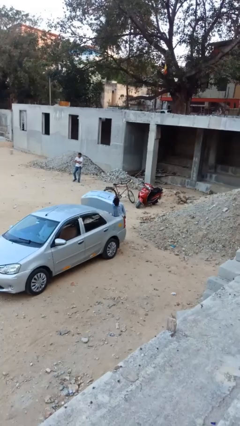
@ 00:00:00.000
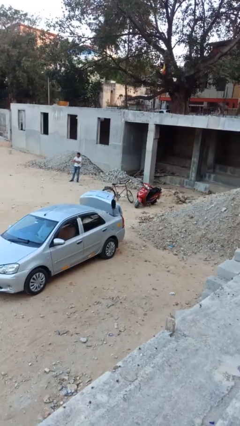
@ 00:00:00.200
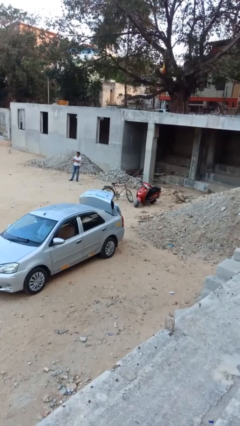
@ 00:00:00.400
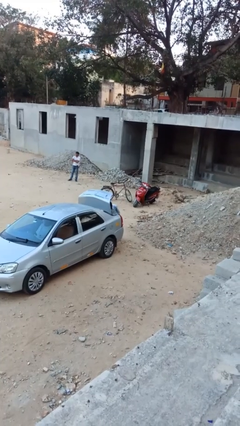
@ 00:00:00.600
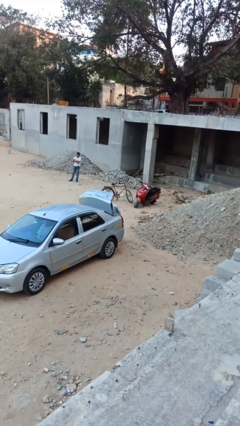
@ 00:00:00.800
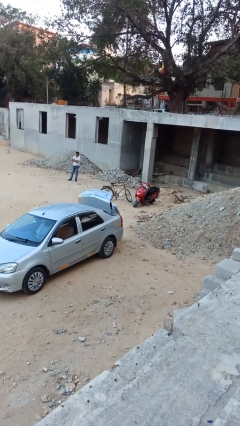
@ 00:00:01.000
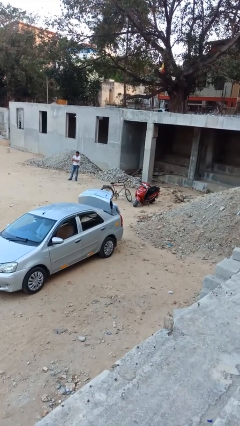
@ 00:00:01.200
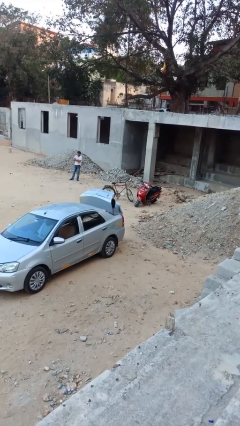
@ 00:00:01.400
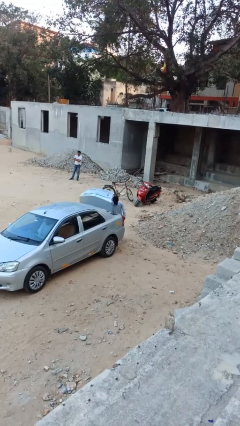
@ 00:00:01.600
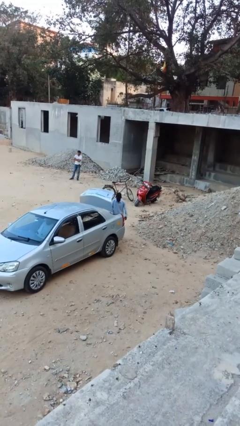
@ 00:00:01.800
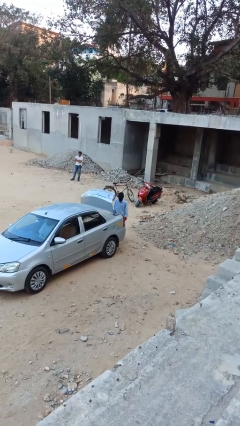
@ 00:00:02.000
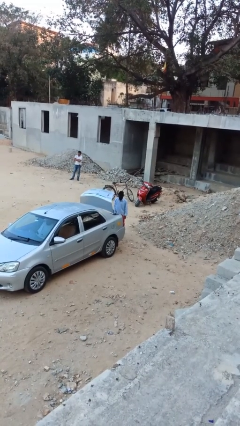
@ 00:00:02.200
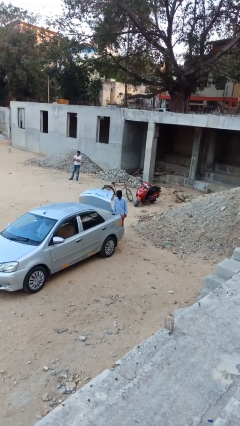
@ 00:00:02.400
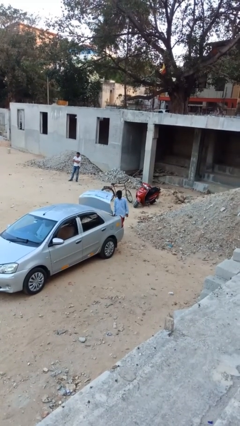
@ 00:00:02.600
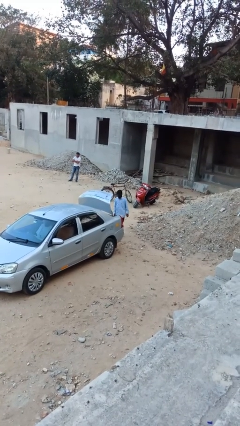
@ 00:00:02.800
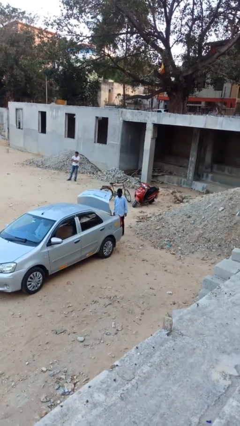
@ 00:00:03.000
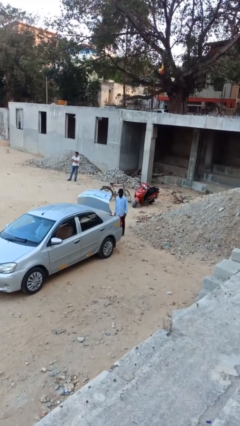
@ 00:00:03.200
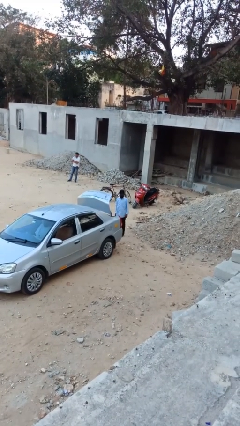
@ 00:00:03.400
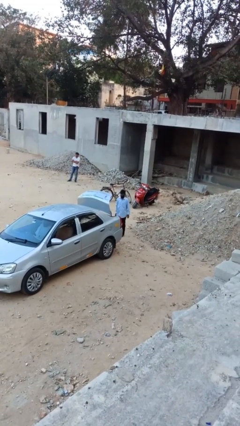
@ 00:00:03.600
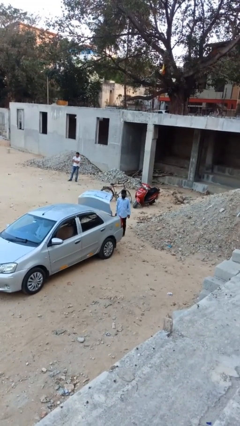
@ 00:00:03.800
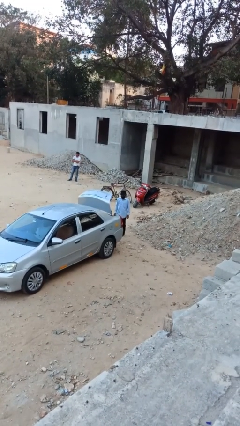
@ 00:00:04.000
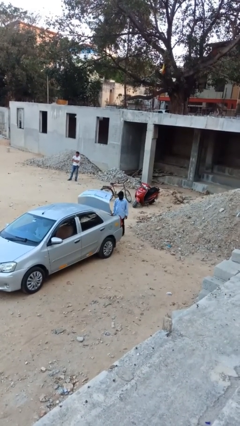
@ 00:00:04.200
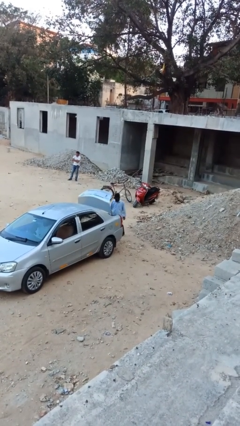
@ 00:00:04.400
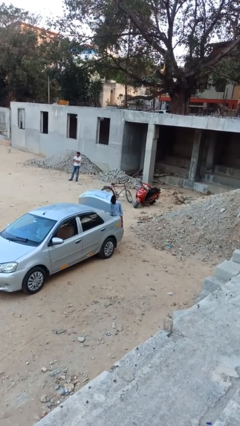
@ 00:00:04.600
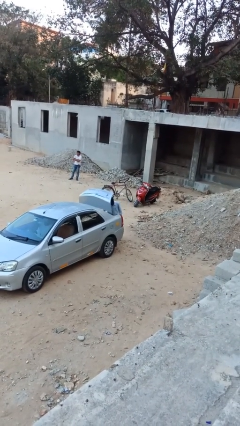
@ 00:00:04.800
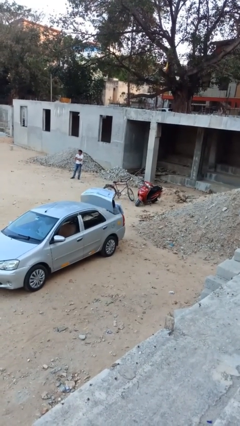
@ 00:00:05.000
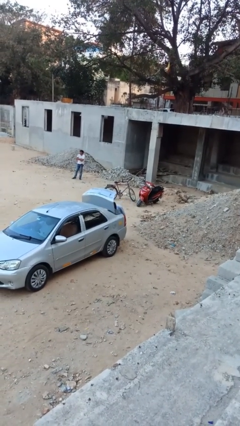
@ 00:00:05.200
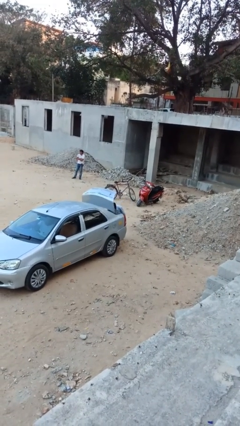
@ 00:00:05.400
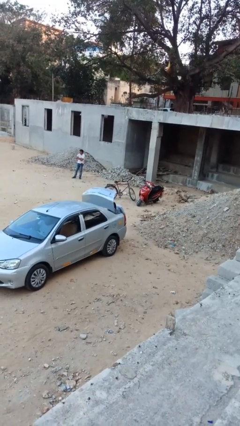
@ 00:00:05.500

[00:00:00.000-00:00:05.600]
person loads car

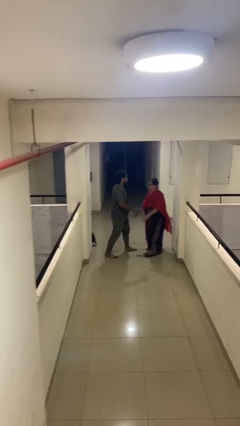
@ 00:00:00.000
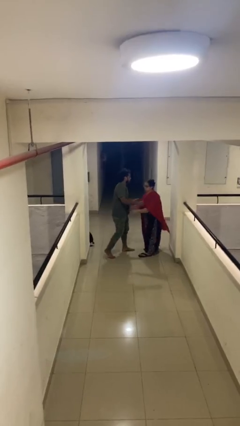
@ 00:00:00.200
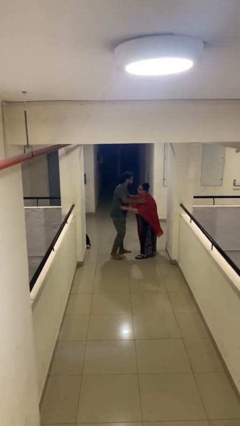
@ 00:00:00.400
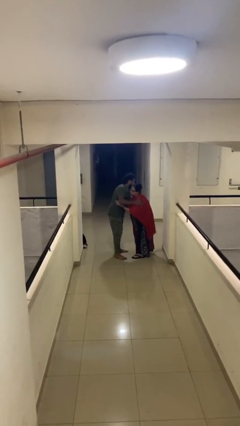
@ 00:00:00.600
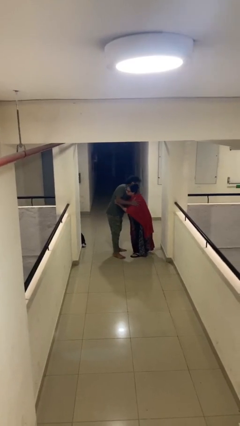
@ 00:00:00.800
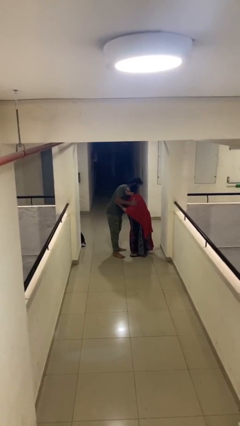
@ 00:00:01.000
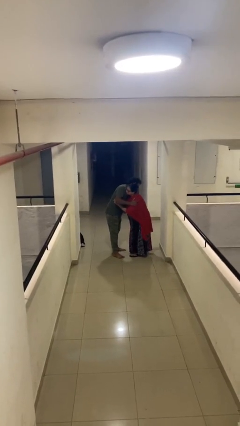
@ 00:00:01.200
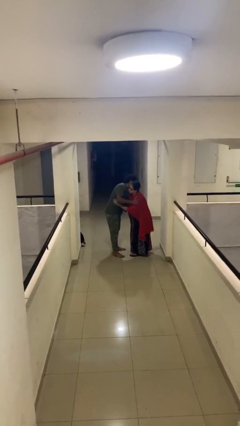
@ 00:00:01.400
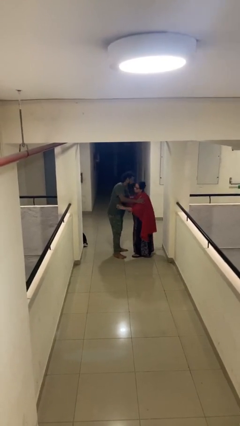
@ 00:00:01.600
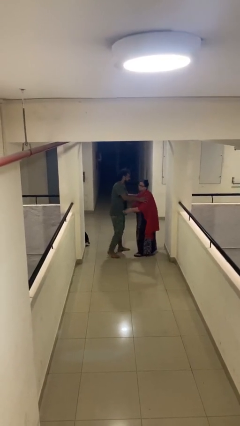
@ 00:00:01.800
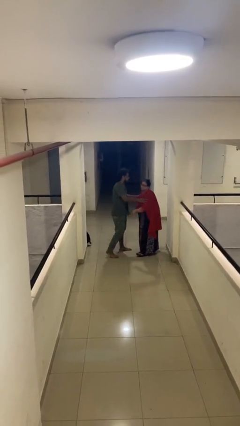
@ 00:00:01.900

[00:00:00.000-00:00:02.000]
person embraces person

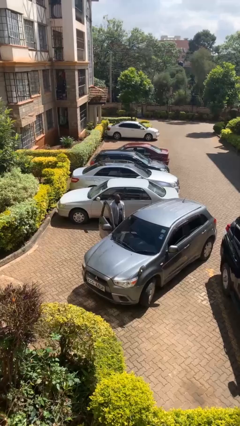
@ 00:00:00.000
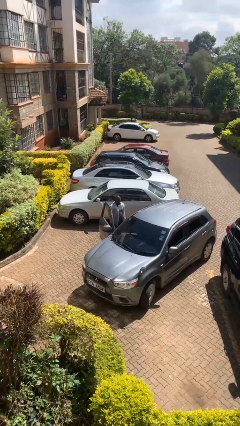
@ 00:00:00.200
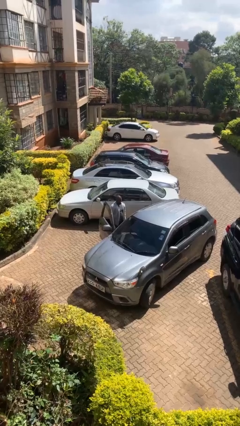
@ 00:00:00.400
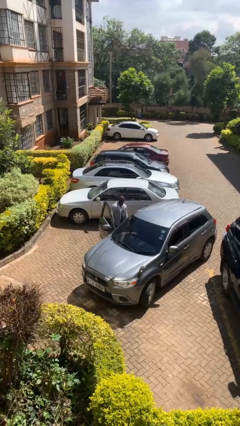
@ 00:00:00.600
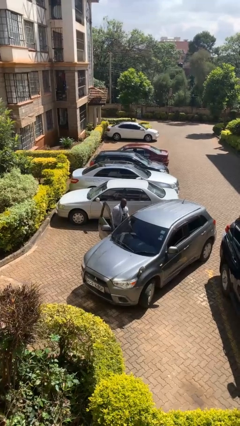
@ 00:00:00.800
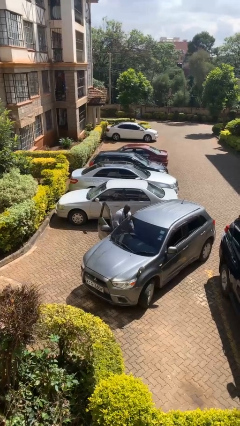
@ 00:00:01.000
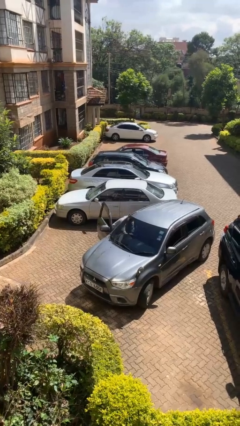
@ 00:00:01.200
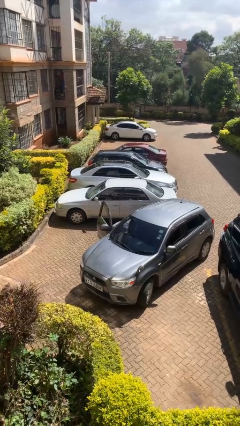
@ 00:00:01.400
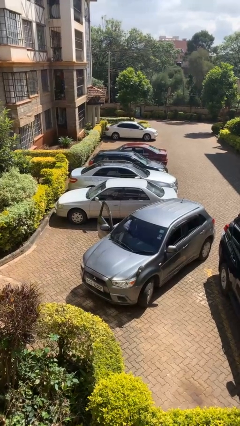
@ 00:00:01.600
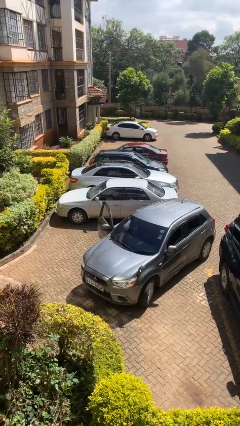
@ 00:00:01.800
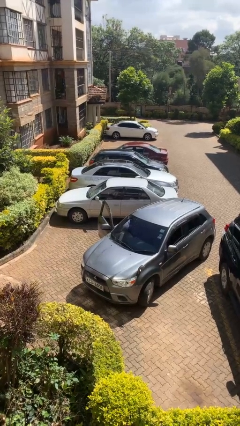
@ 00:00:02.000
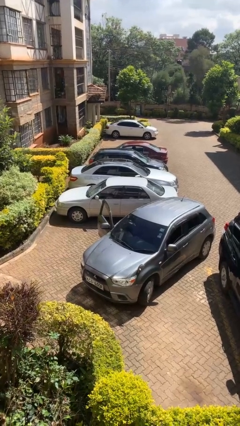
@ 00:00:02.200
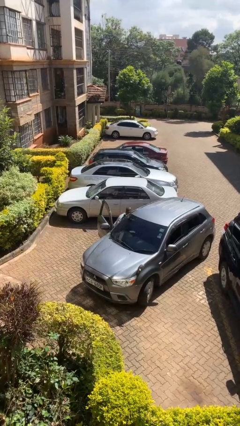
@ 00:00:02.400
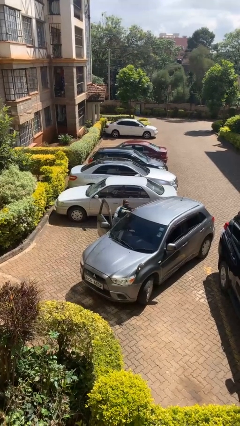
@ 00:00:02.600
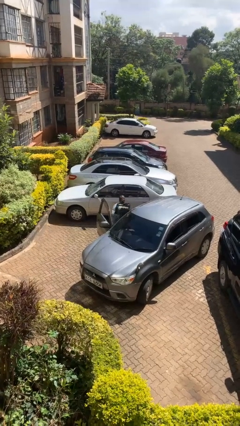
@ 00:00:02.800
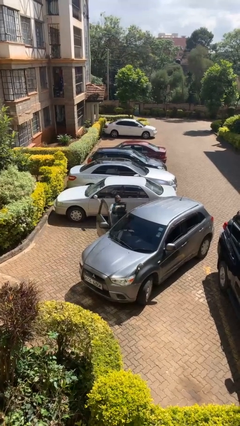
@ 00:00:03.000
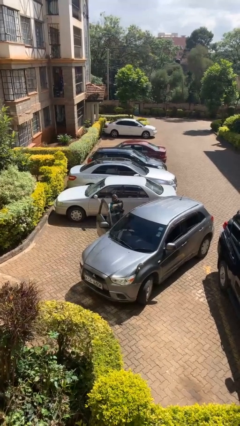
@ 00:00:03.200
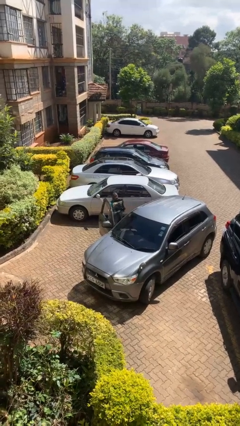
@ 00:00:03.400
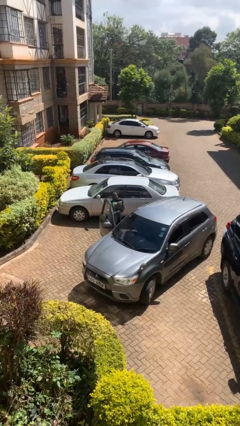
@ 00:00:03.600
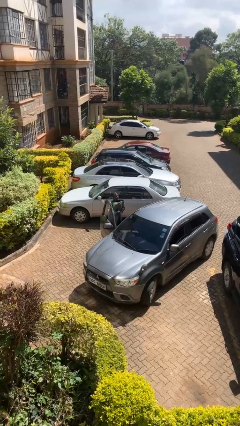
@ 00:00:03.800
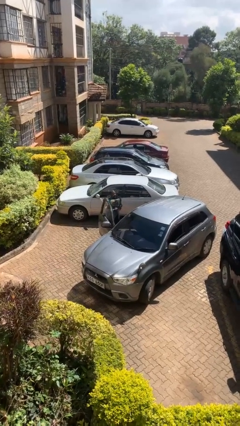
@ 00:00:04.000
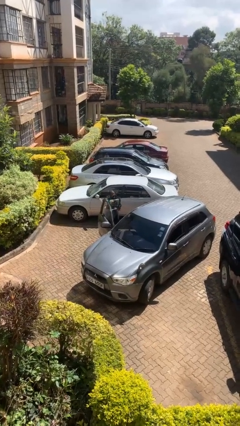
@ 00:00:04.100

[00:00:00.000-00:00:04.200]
person unloads car

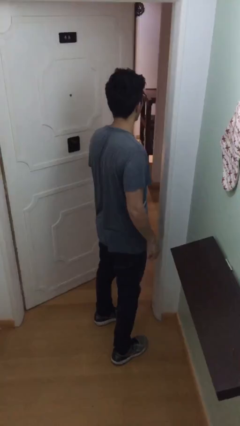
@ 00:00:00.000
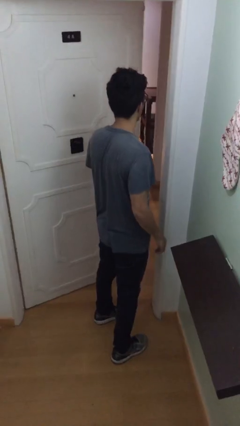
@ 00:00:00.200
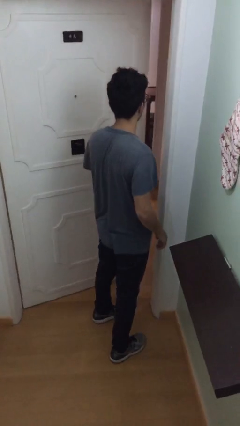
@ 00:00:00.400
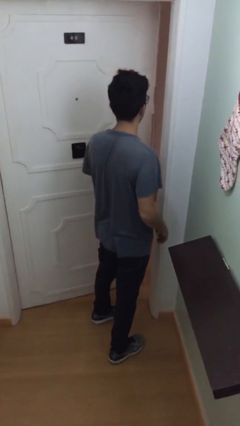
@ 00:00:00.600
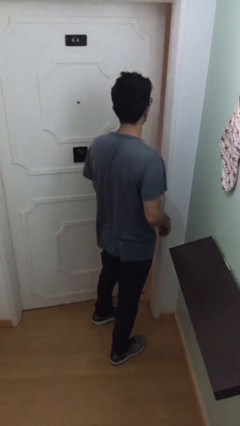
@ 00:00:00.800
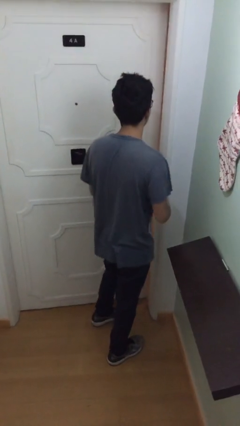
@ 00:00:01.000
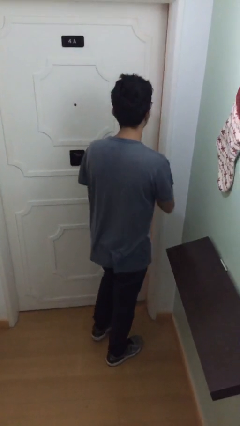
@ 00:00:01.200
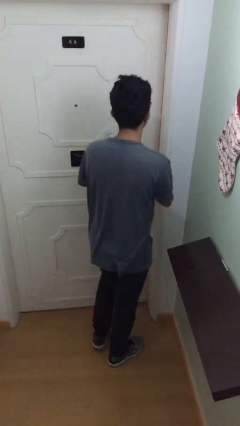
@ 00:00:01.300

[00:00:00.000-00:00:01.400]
person closes facility door

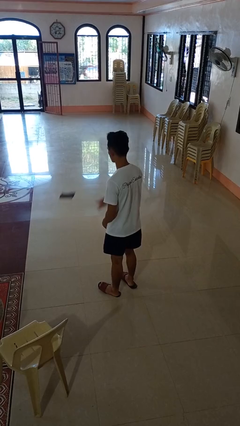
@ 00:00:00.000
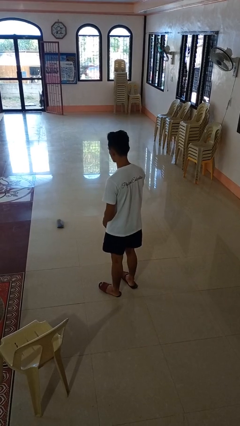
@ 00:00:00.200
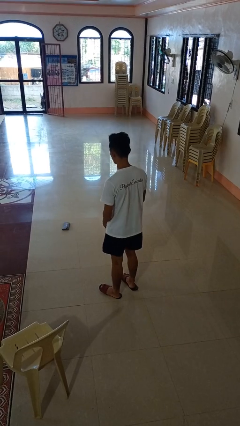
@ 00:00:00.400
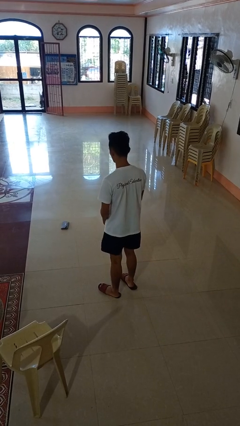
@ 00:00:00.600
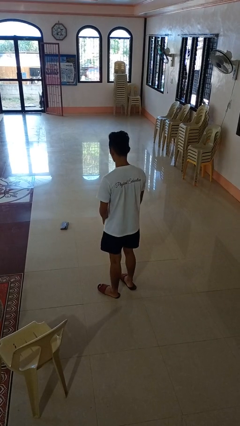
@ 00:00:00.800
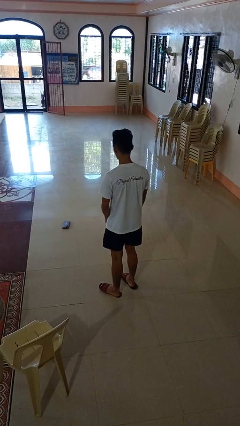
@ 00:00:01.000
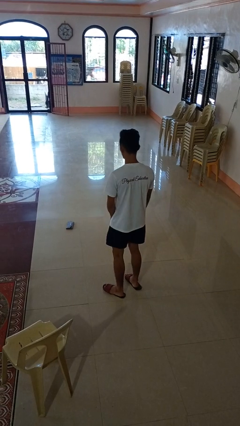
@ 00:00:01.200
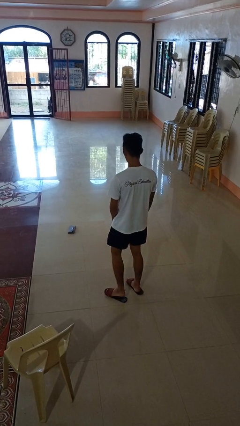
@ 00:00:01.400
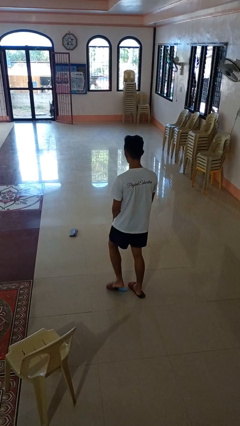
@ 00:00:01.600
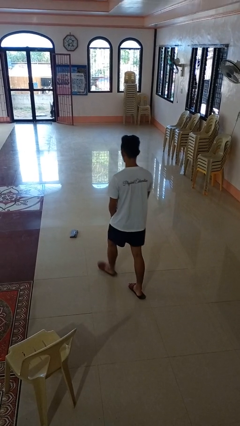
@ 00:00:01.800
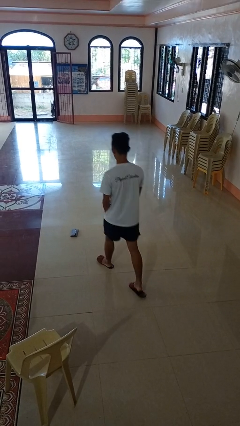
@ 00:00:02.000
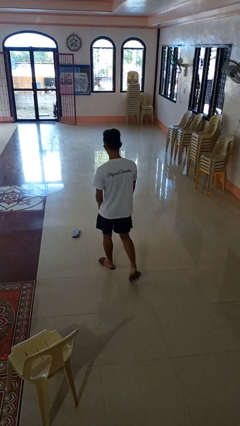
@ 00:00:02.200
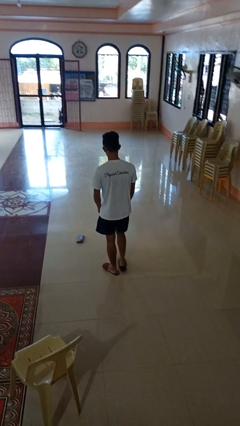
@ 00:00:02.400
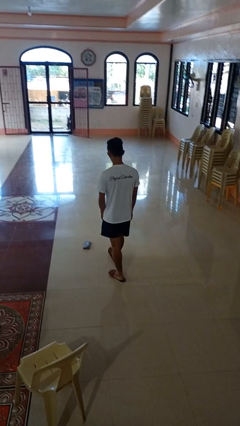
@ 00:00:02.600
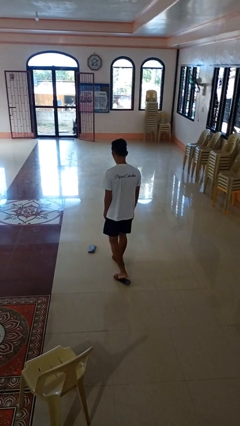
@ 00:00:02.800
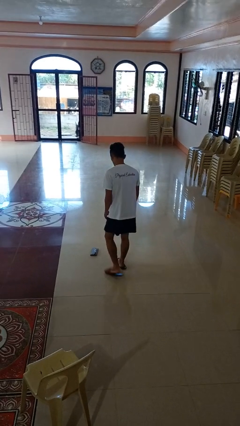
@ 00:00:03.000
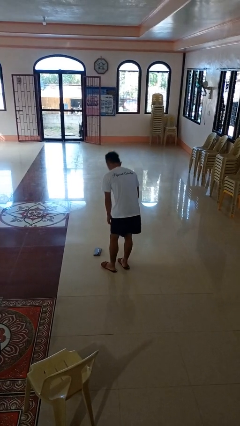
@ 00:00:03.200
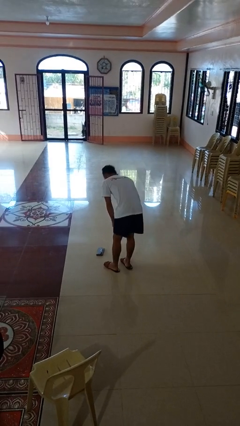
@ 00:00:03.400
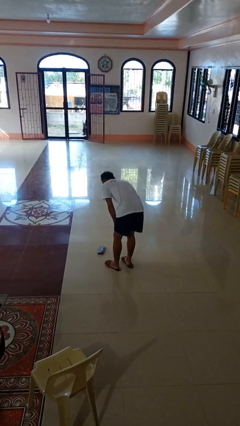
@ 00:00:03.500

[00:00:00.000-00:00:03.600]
person throws object to ground

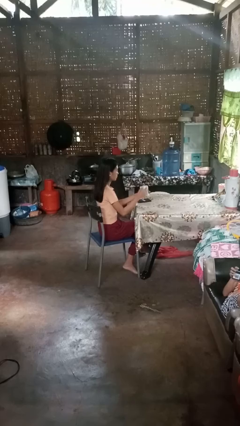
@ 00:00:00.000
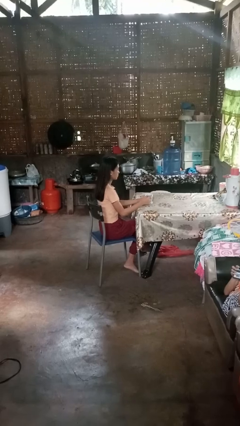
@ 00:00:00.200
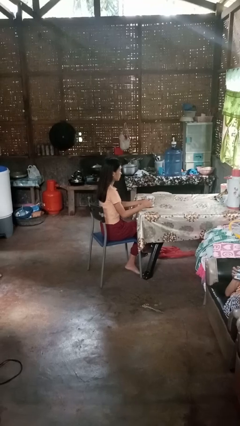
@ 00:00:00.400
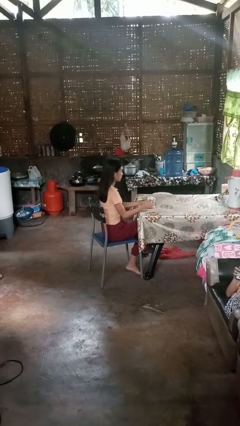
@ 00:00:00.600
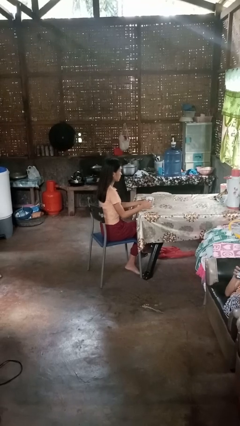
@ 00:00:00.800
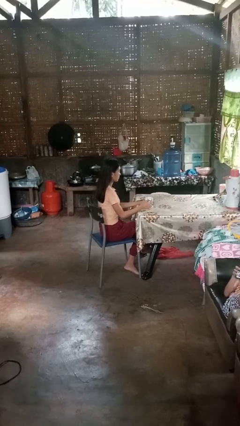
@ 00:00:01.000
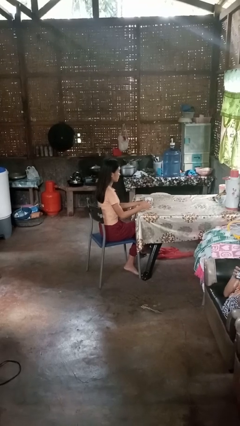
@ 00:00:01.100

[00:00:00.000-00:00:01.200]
person puts down object on table
